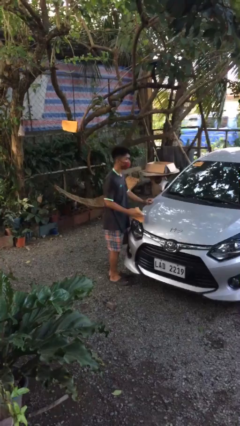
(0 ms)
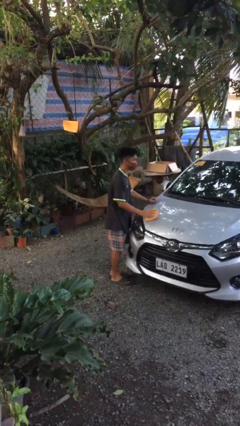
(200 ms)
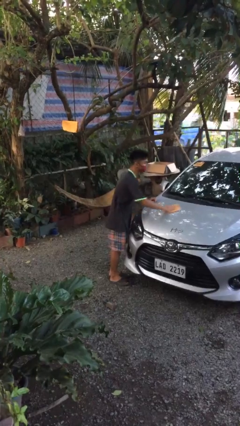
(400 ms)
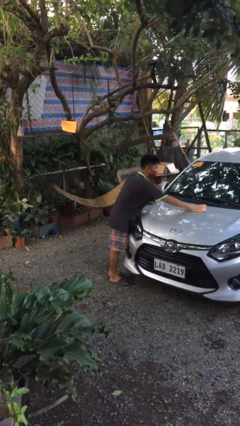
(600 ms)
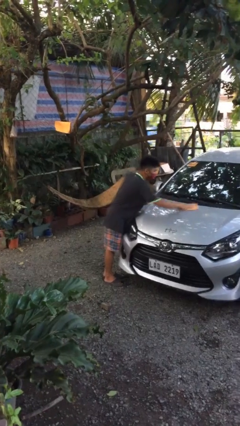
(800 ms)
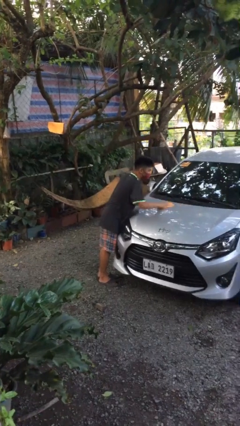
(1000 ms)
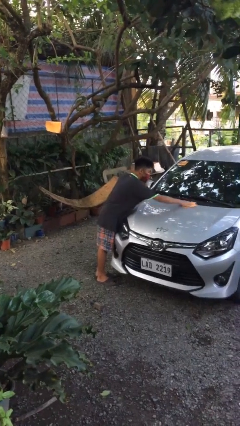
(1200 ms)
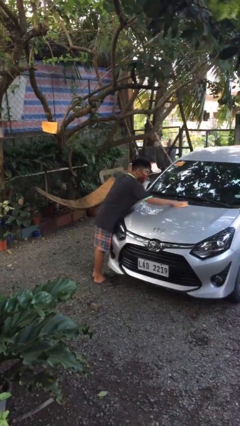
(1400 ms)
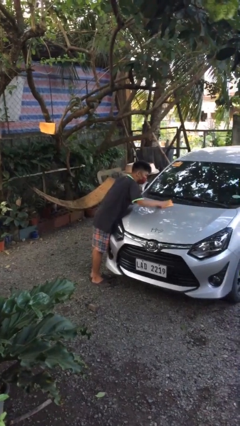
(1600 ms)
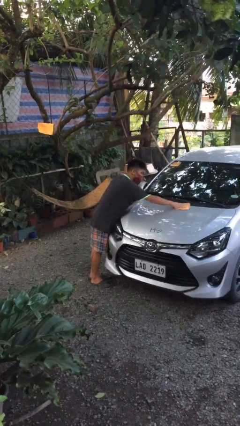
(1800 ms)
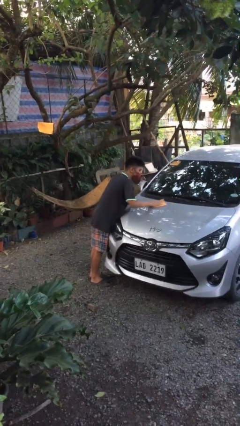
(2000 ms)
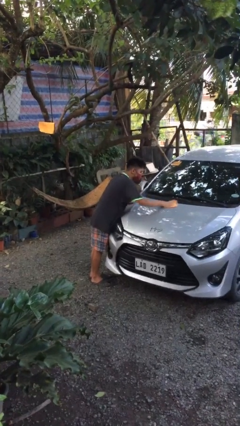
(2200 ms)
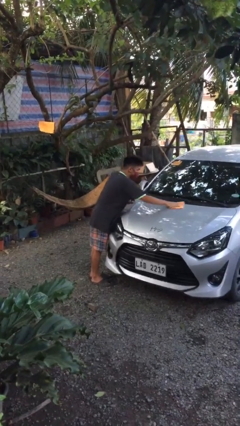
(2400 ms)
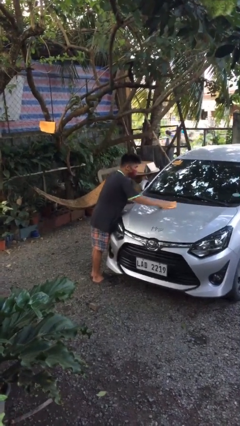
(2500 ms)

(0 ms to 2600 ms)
person polishes car with rag

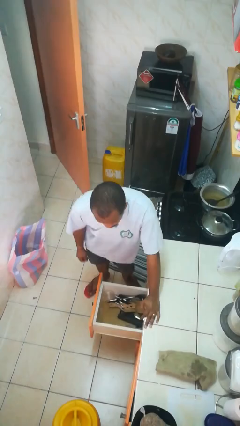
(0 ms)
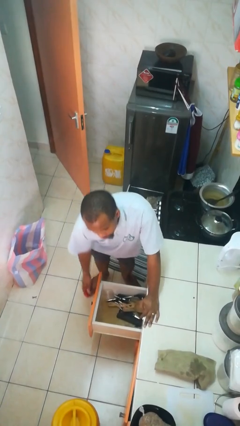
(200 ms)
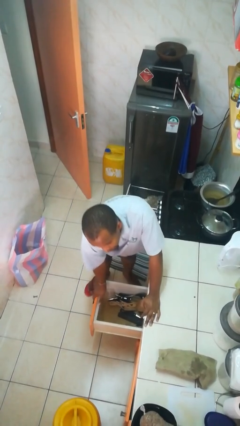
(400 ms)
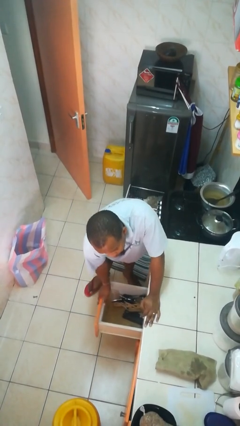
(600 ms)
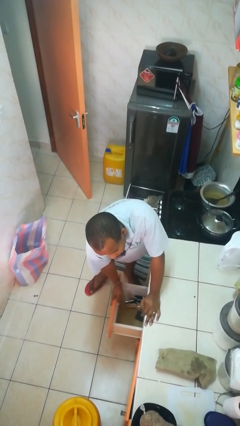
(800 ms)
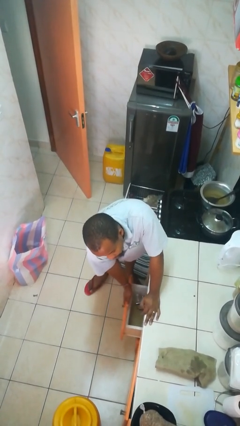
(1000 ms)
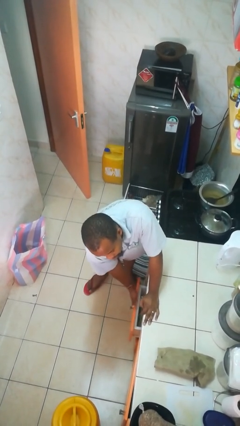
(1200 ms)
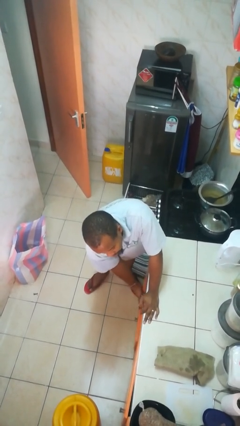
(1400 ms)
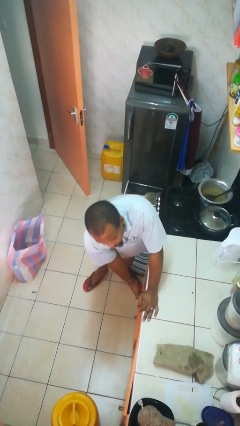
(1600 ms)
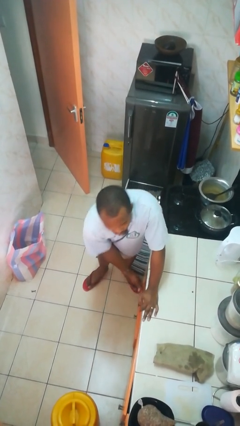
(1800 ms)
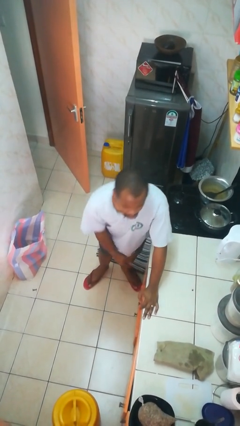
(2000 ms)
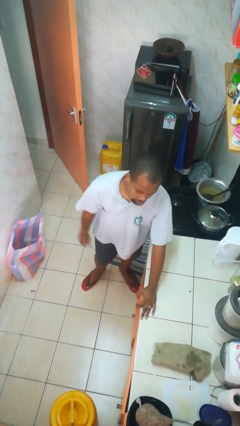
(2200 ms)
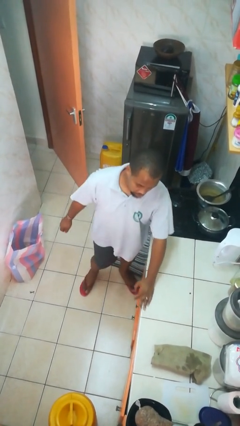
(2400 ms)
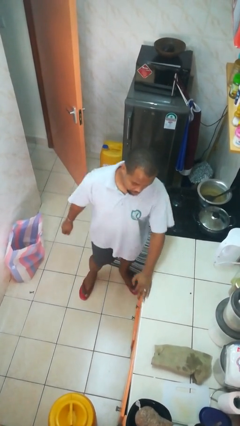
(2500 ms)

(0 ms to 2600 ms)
person closes kitchen drawer

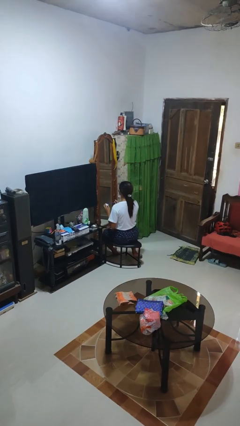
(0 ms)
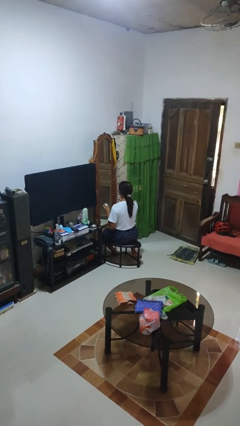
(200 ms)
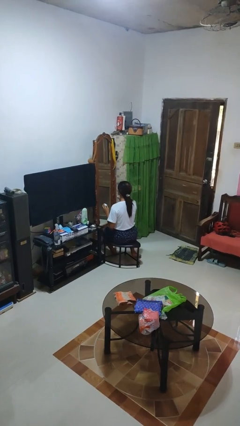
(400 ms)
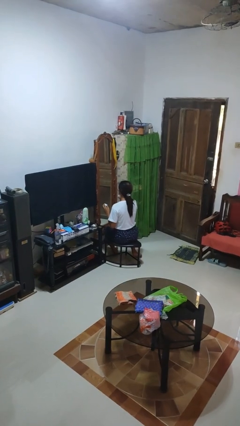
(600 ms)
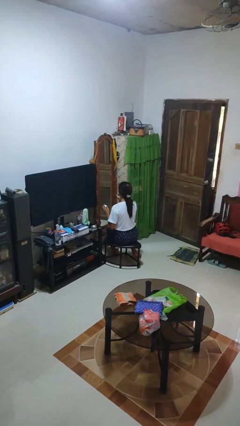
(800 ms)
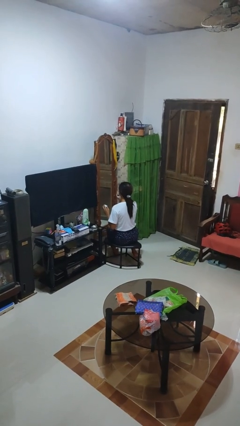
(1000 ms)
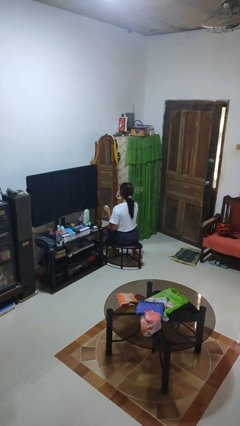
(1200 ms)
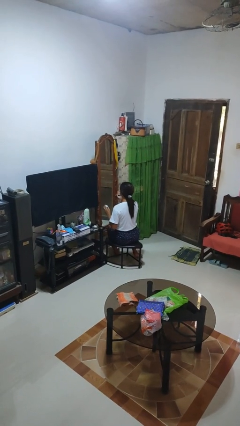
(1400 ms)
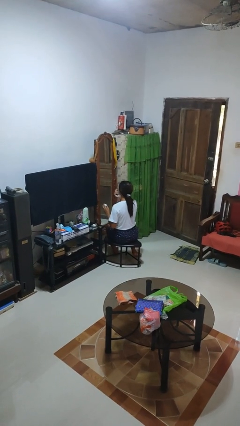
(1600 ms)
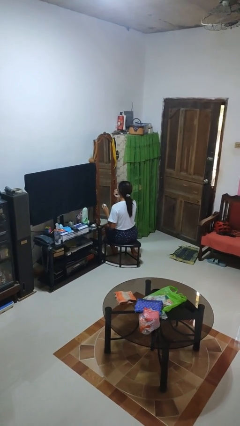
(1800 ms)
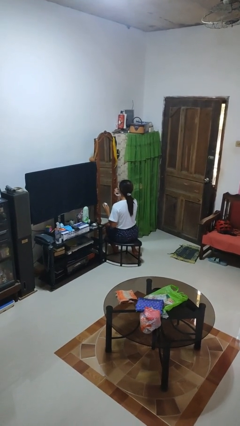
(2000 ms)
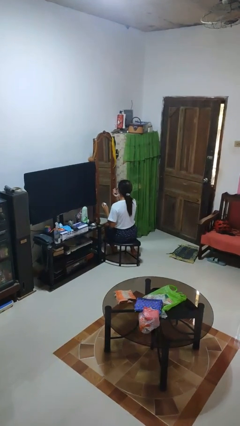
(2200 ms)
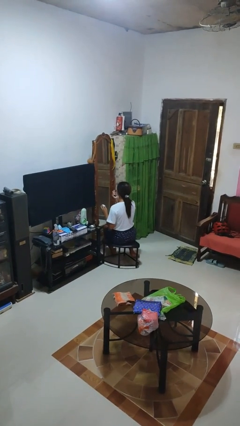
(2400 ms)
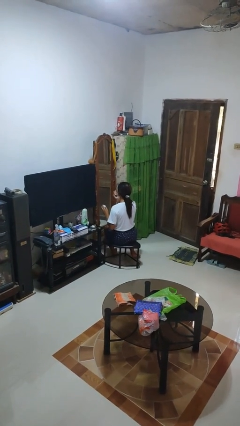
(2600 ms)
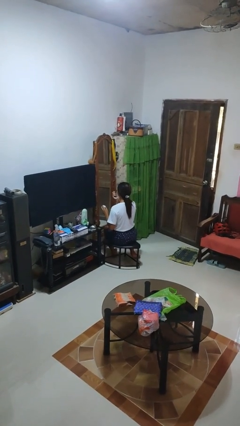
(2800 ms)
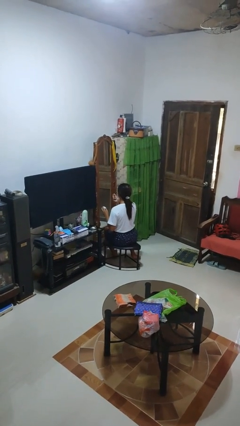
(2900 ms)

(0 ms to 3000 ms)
person applies eye makeup

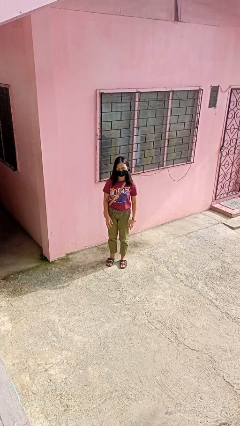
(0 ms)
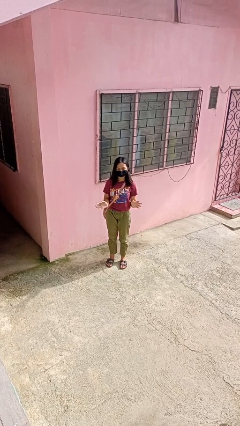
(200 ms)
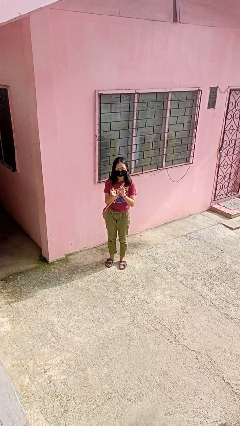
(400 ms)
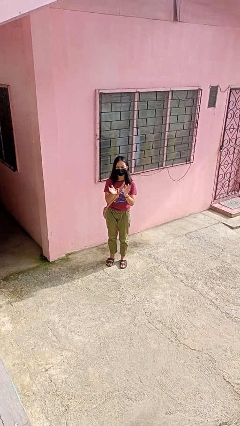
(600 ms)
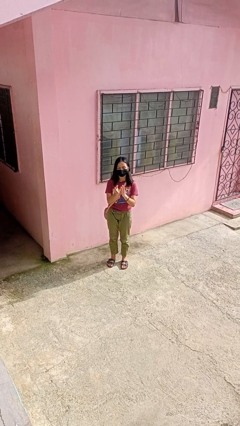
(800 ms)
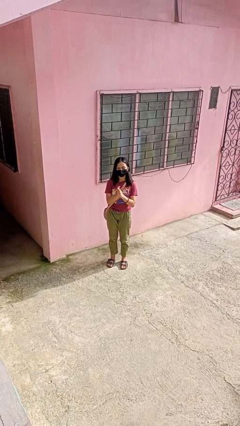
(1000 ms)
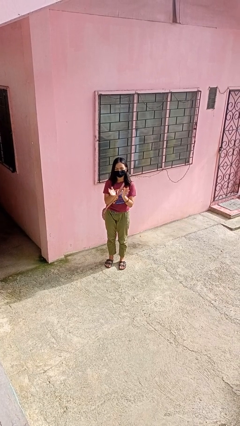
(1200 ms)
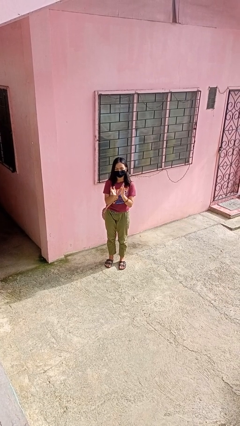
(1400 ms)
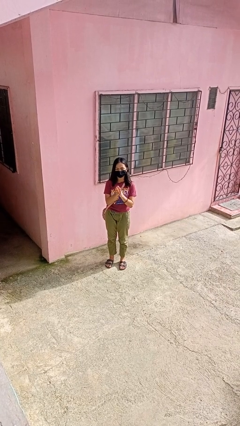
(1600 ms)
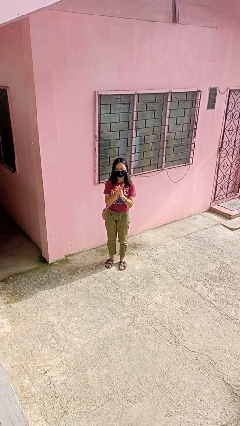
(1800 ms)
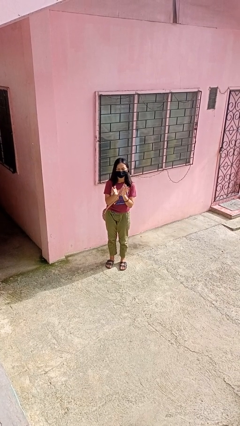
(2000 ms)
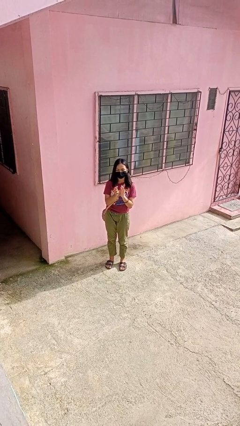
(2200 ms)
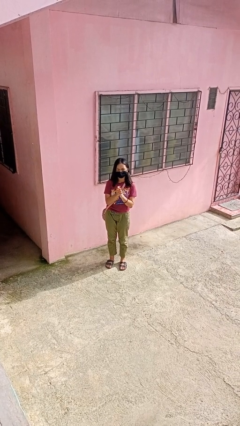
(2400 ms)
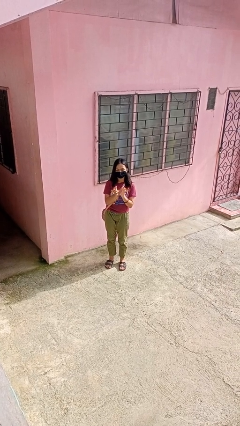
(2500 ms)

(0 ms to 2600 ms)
person claps hands

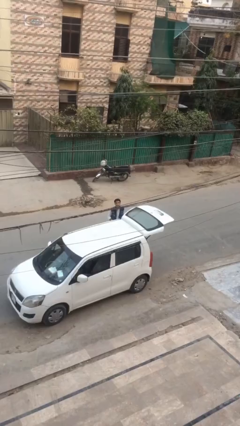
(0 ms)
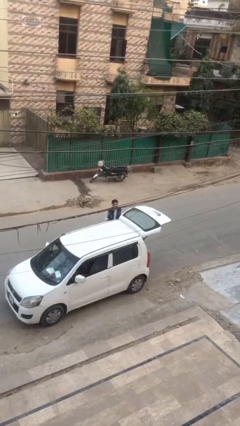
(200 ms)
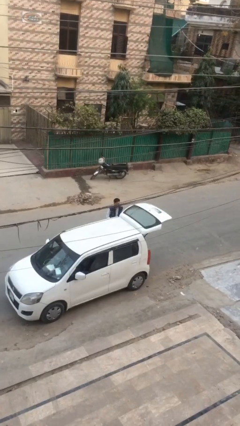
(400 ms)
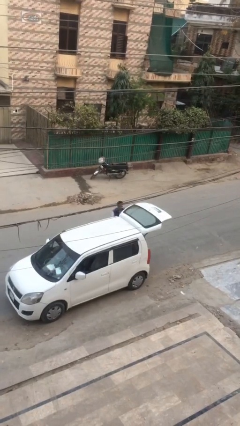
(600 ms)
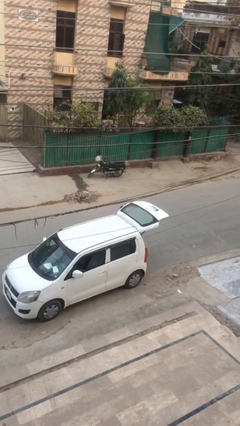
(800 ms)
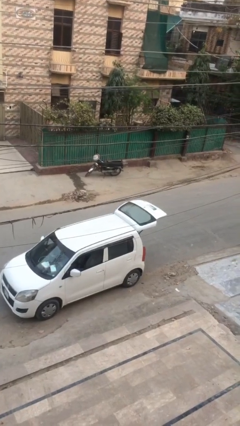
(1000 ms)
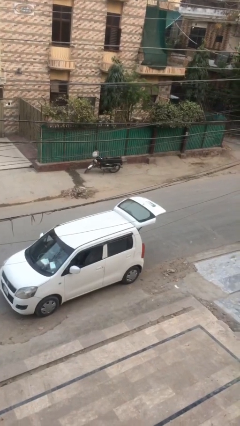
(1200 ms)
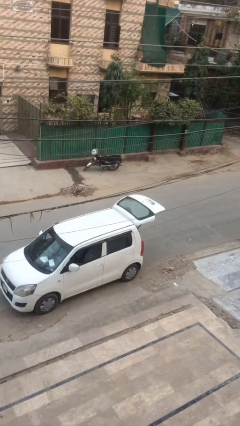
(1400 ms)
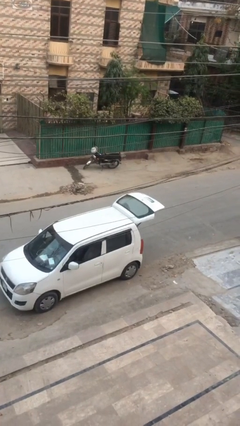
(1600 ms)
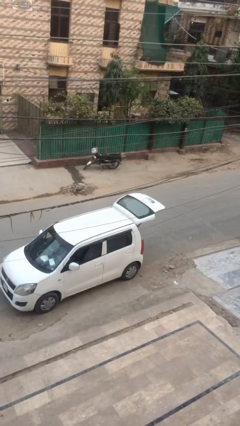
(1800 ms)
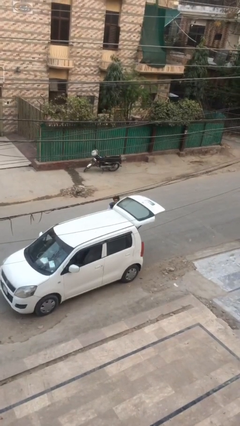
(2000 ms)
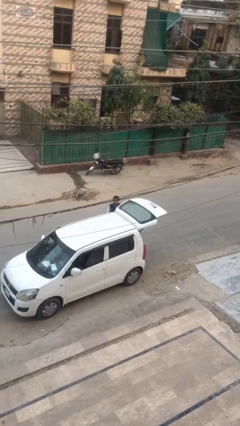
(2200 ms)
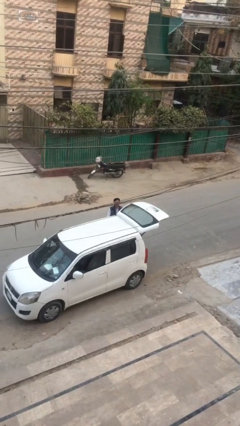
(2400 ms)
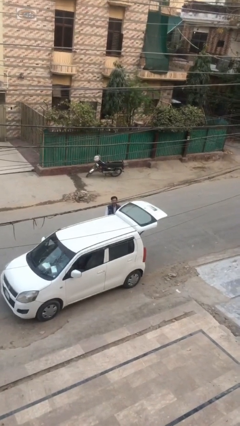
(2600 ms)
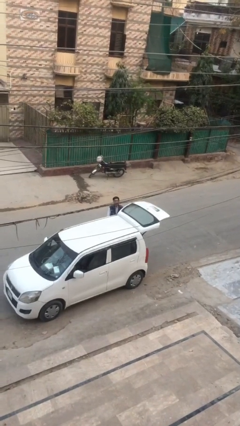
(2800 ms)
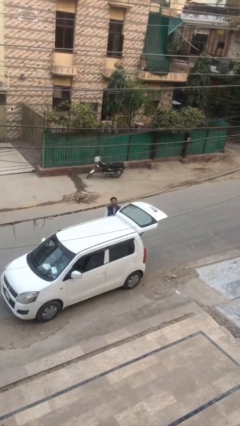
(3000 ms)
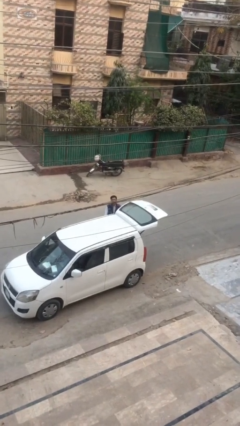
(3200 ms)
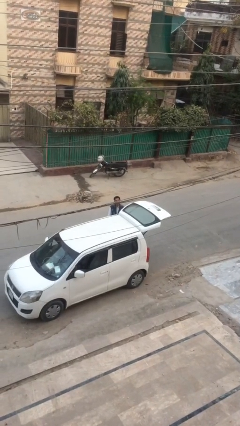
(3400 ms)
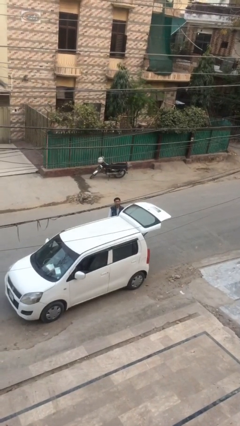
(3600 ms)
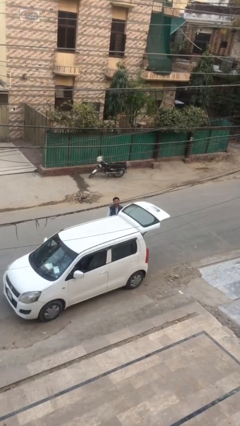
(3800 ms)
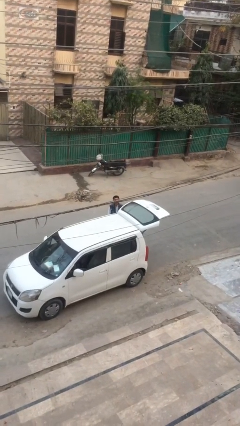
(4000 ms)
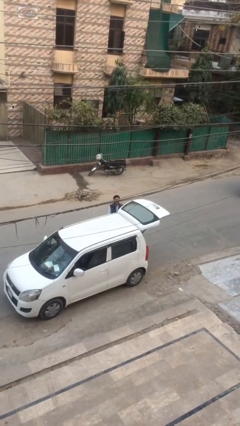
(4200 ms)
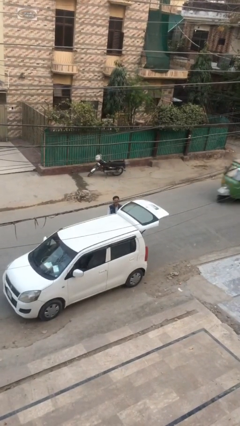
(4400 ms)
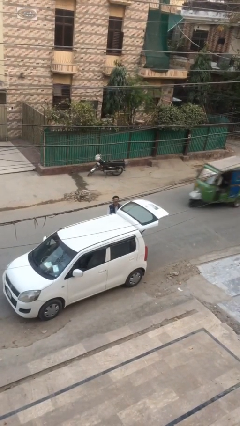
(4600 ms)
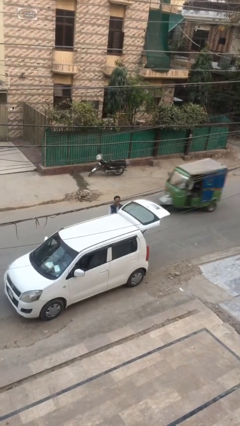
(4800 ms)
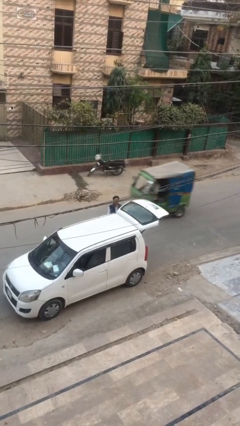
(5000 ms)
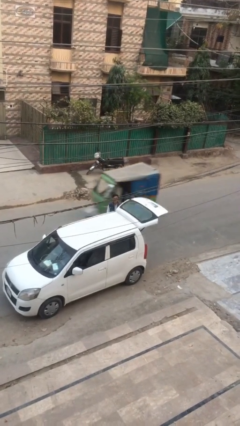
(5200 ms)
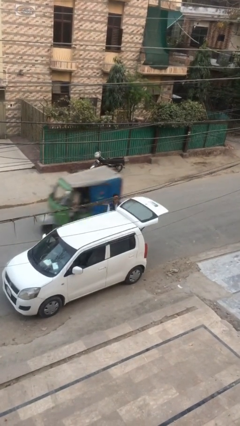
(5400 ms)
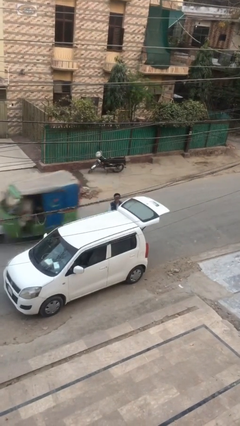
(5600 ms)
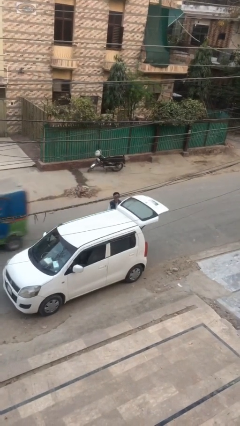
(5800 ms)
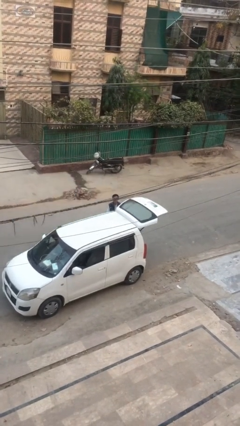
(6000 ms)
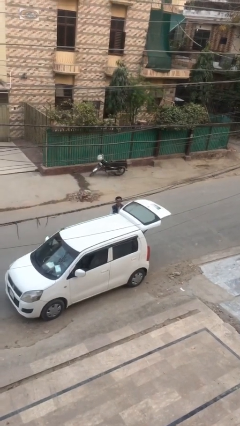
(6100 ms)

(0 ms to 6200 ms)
person loads car
